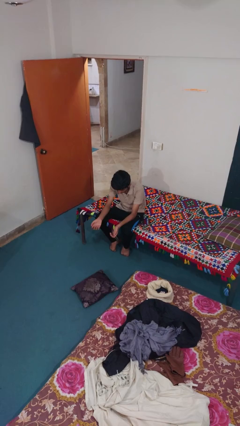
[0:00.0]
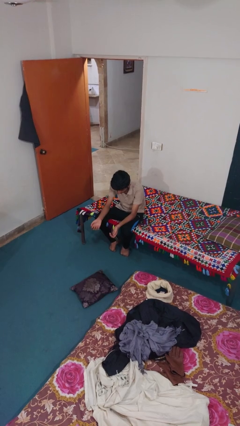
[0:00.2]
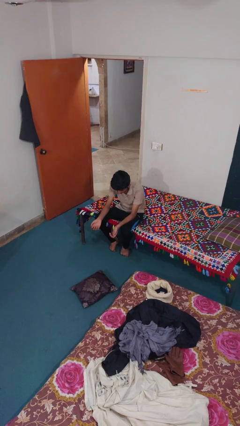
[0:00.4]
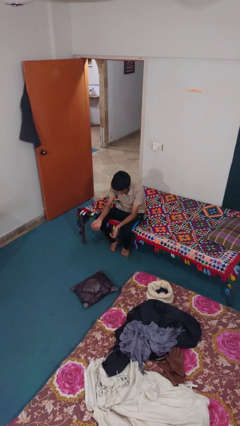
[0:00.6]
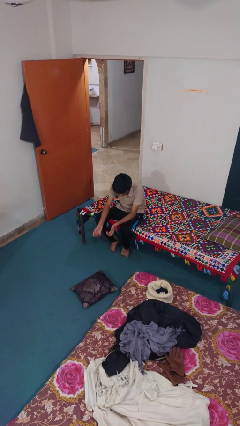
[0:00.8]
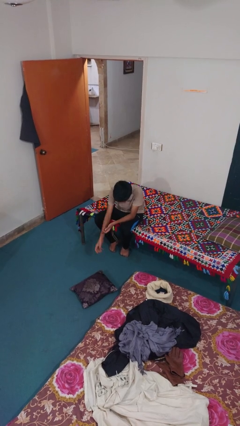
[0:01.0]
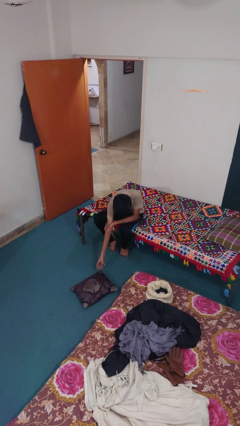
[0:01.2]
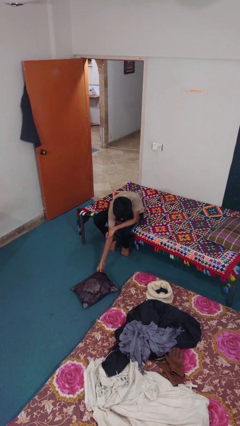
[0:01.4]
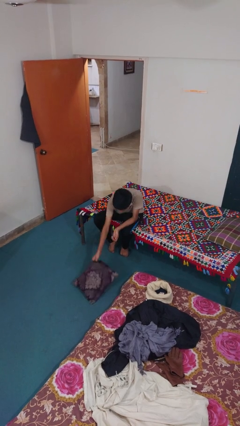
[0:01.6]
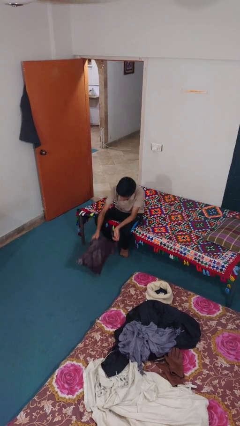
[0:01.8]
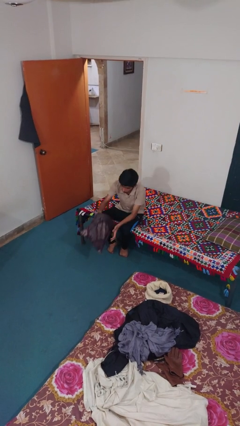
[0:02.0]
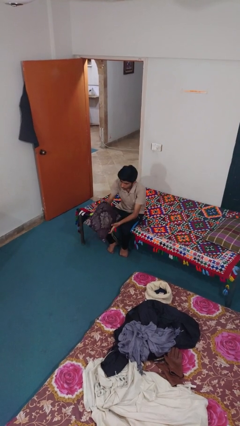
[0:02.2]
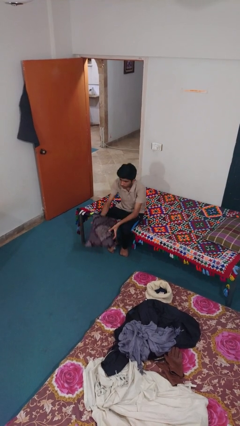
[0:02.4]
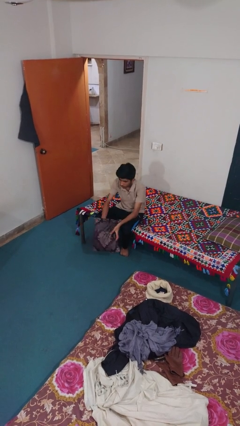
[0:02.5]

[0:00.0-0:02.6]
person picks up object from floor

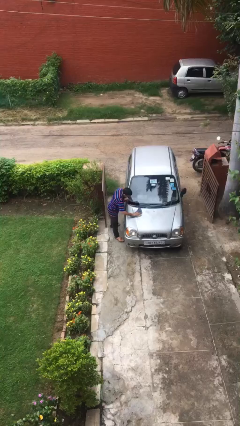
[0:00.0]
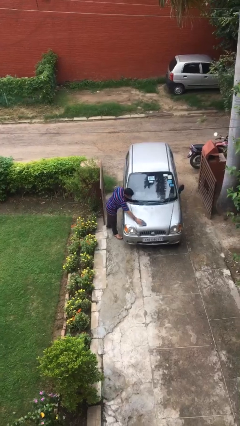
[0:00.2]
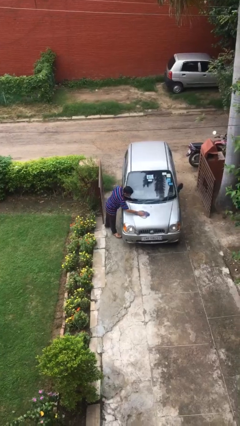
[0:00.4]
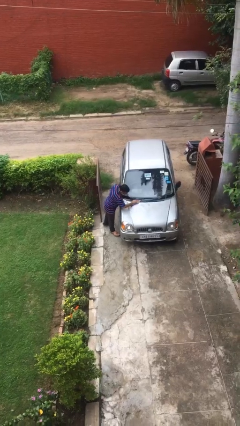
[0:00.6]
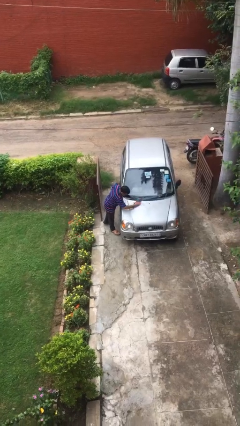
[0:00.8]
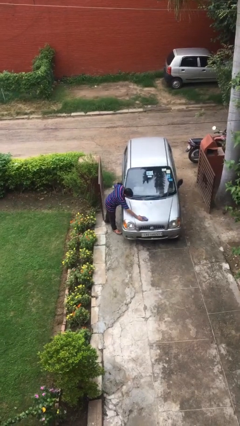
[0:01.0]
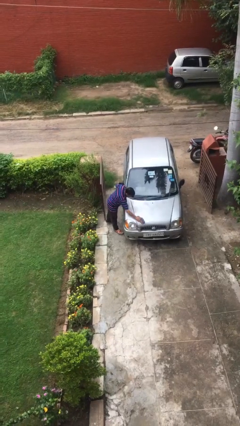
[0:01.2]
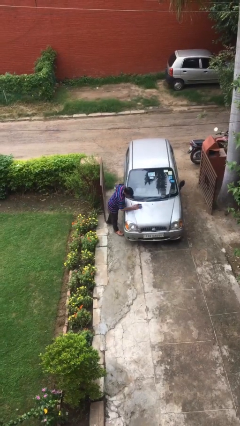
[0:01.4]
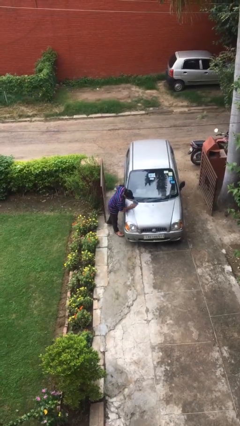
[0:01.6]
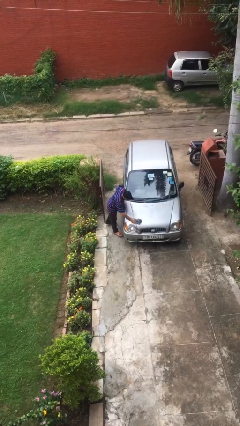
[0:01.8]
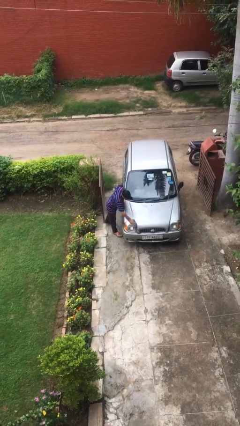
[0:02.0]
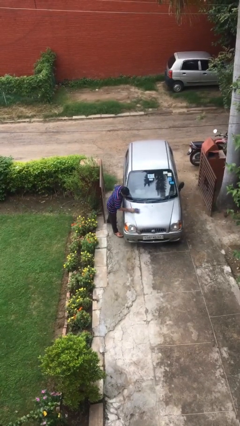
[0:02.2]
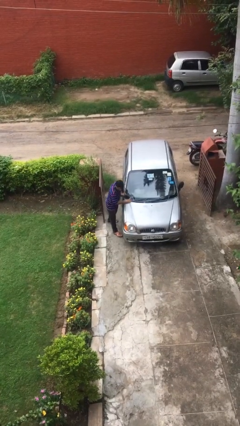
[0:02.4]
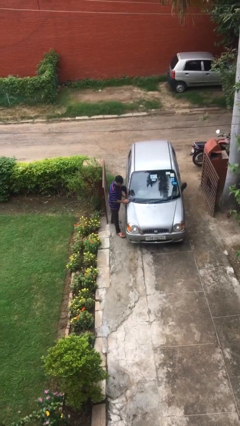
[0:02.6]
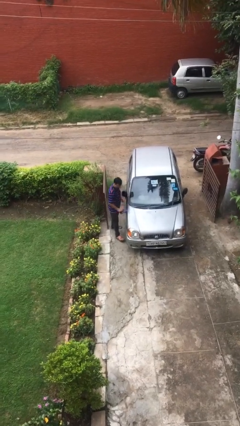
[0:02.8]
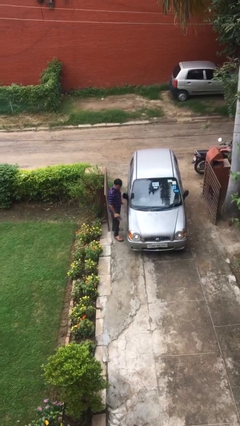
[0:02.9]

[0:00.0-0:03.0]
person polishes car with rag

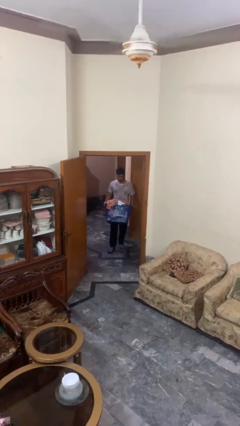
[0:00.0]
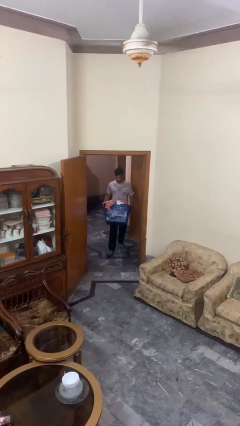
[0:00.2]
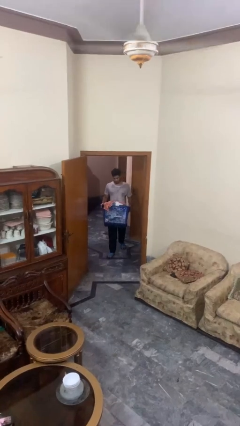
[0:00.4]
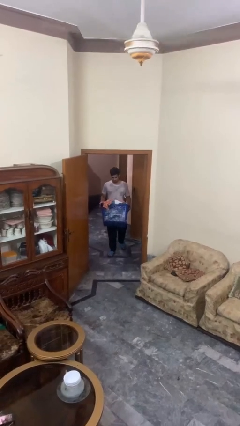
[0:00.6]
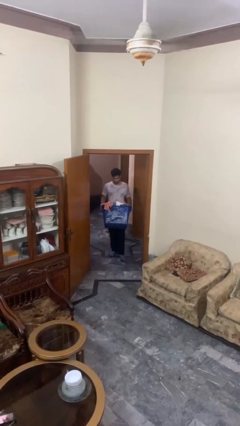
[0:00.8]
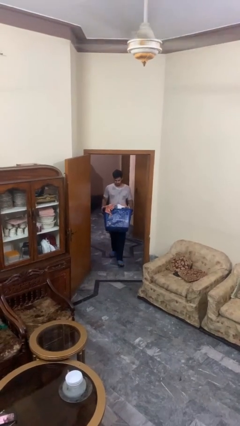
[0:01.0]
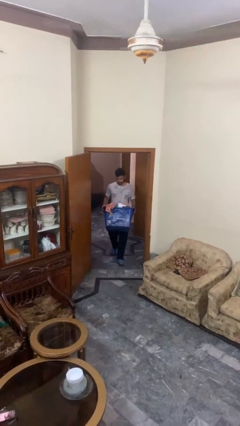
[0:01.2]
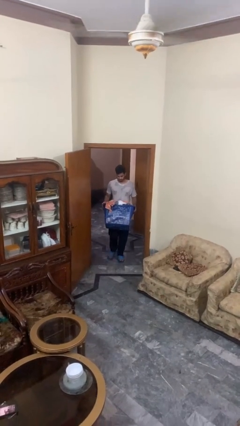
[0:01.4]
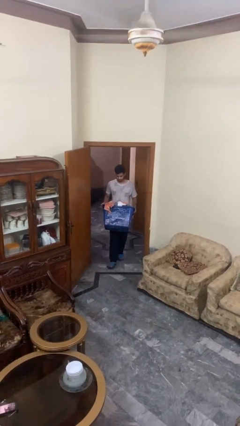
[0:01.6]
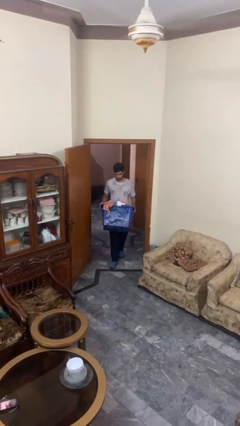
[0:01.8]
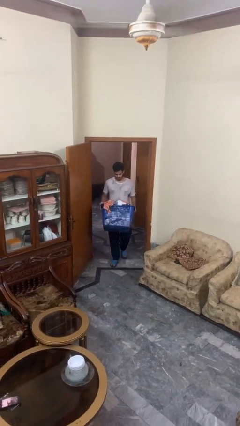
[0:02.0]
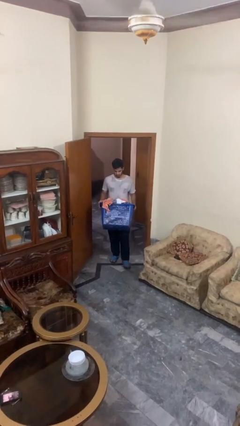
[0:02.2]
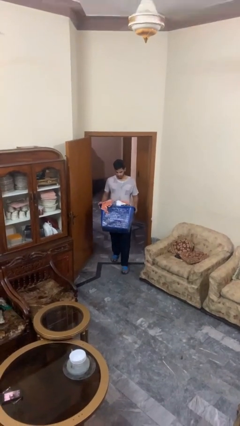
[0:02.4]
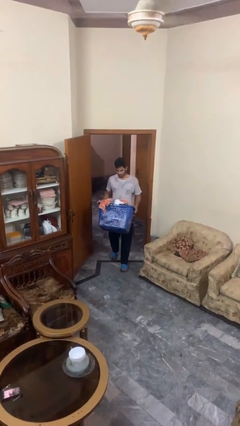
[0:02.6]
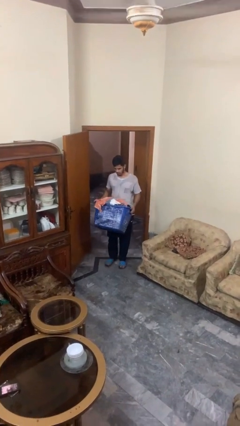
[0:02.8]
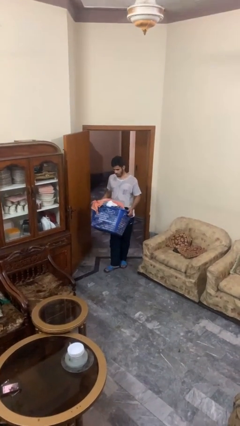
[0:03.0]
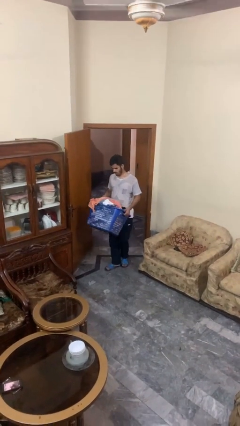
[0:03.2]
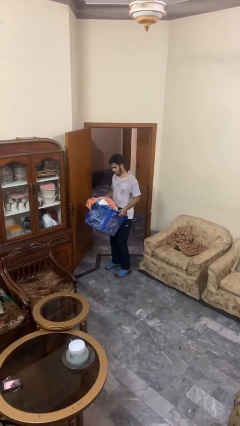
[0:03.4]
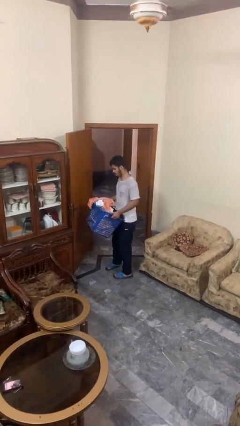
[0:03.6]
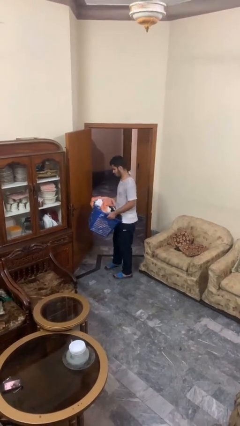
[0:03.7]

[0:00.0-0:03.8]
person carries laundry basket

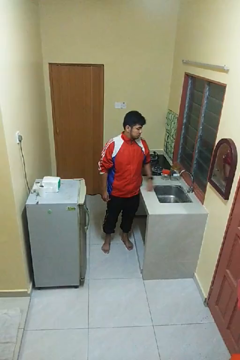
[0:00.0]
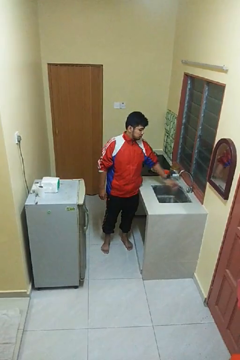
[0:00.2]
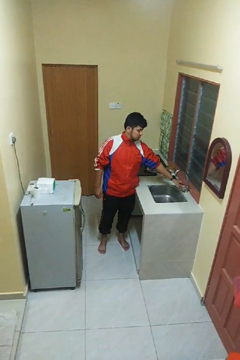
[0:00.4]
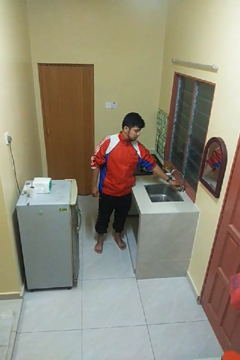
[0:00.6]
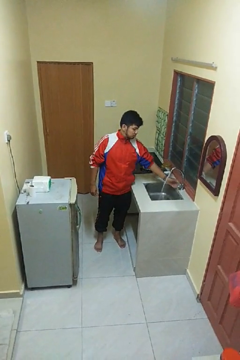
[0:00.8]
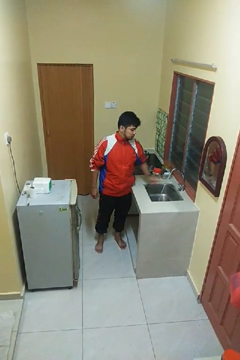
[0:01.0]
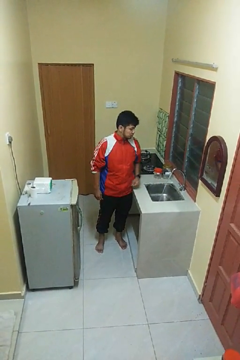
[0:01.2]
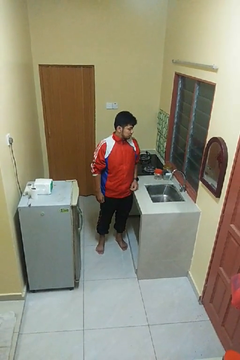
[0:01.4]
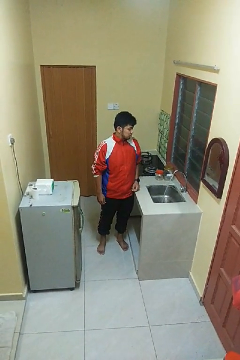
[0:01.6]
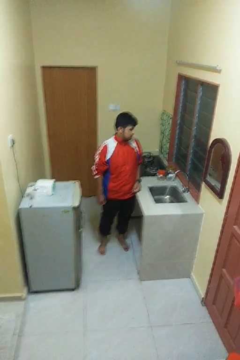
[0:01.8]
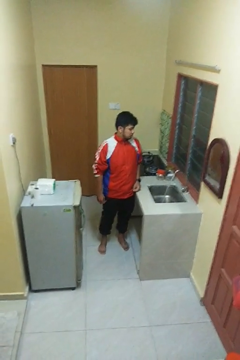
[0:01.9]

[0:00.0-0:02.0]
person turns on faucet

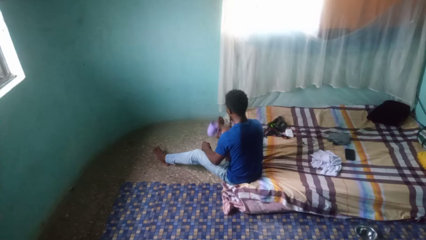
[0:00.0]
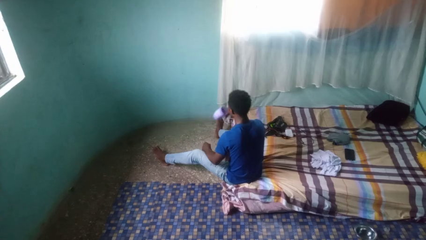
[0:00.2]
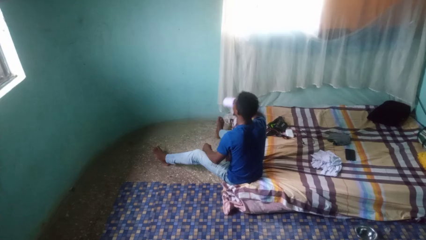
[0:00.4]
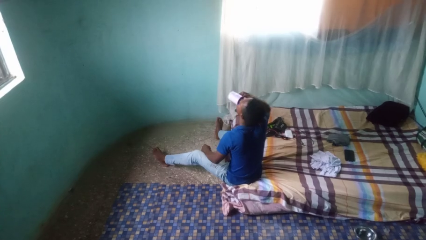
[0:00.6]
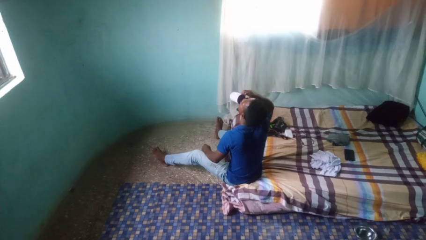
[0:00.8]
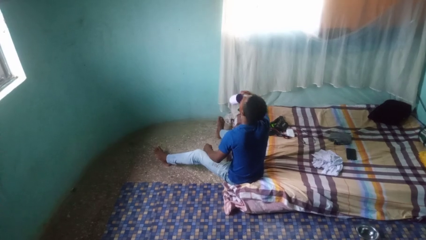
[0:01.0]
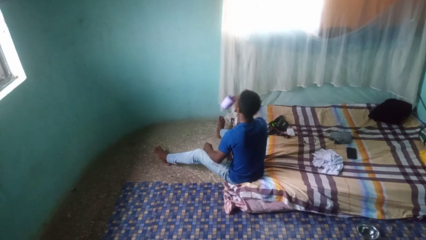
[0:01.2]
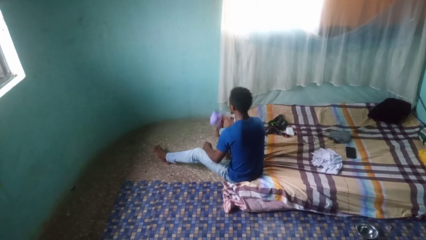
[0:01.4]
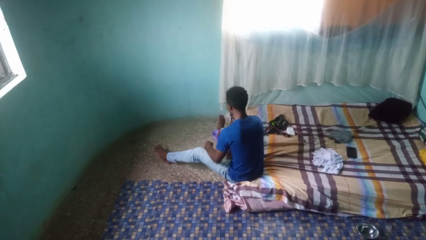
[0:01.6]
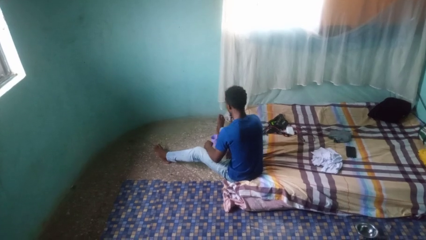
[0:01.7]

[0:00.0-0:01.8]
person drinks from cup

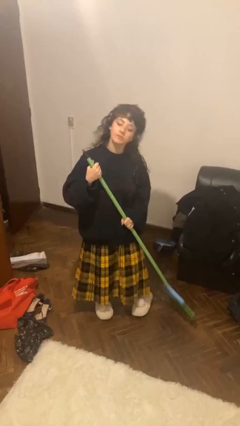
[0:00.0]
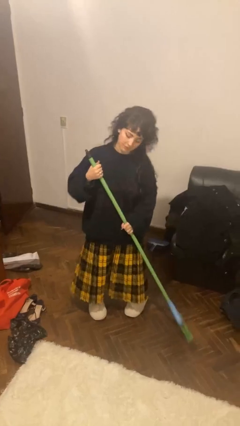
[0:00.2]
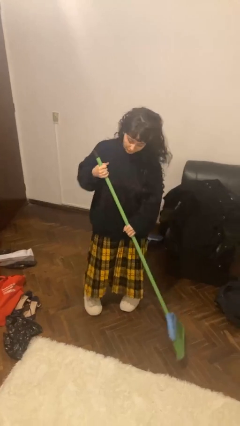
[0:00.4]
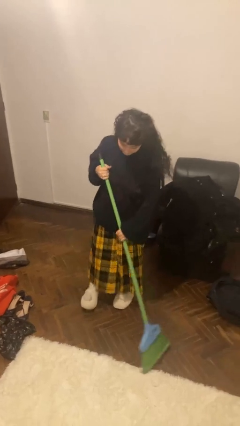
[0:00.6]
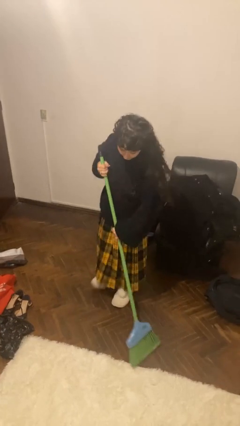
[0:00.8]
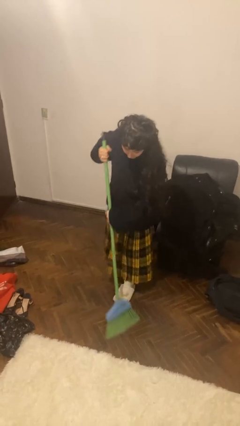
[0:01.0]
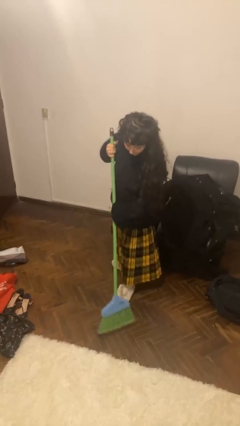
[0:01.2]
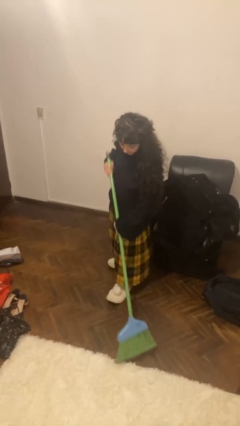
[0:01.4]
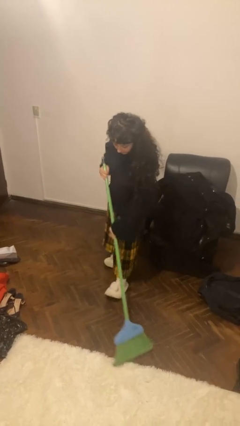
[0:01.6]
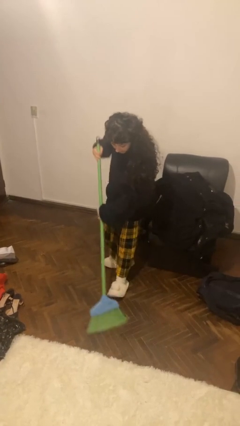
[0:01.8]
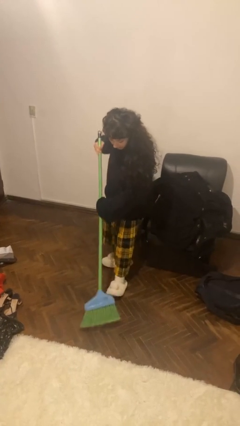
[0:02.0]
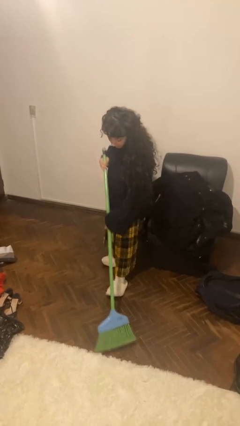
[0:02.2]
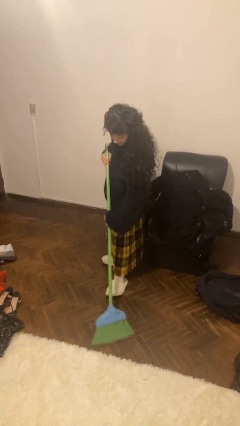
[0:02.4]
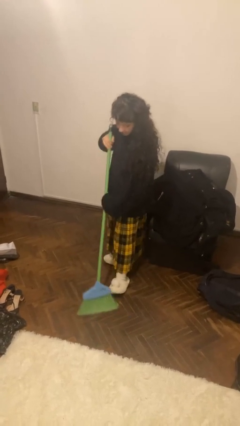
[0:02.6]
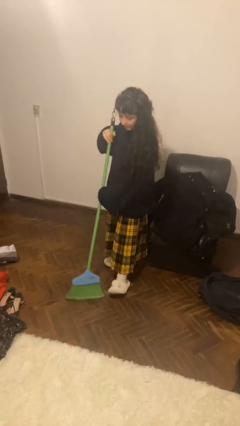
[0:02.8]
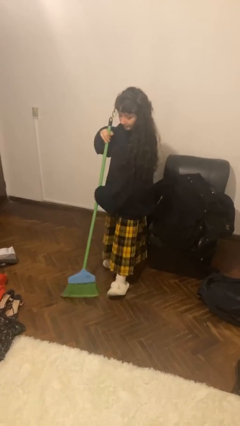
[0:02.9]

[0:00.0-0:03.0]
person sweeps floor

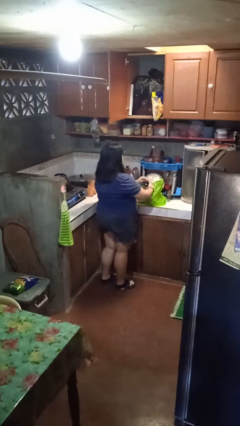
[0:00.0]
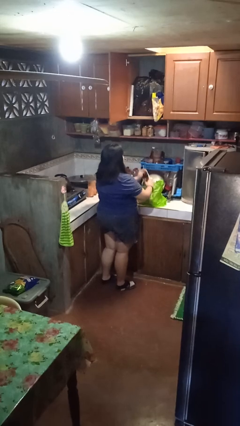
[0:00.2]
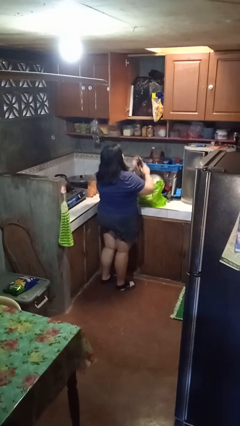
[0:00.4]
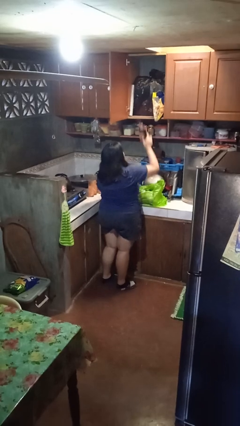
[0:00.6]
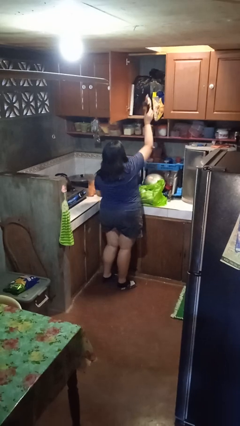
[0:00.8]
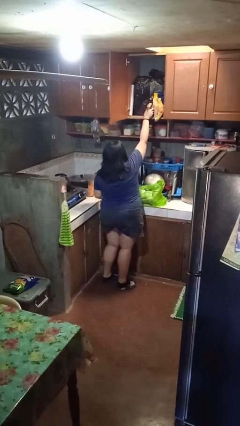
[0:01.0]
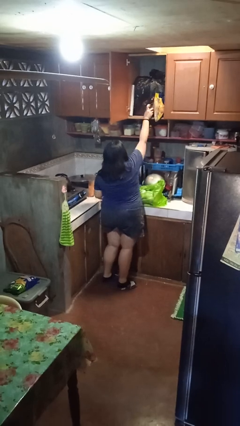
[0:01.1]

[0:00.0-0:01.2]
person loads groceries into cabinet
